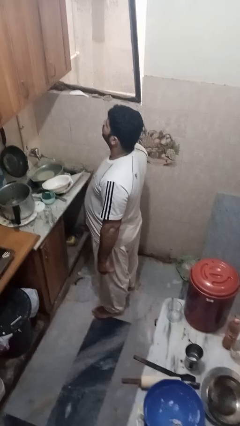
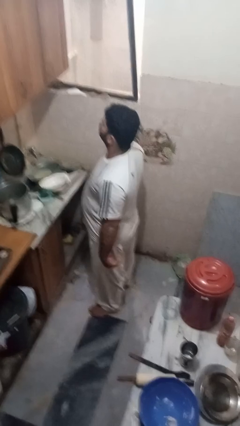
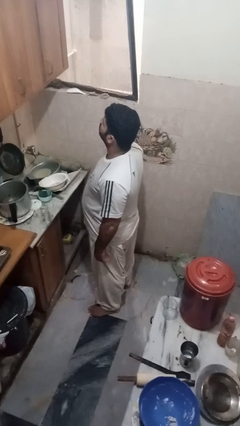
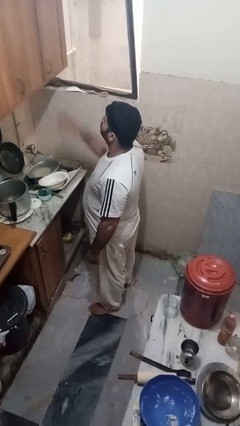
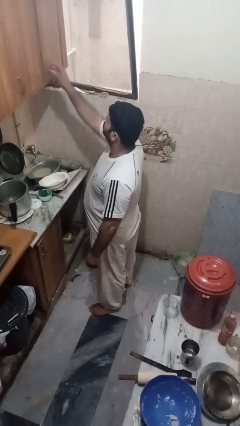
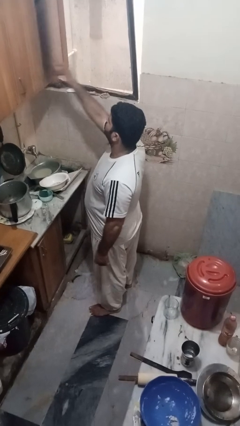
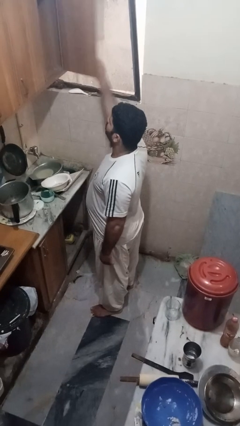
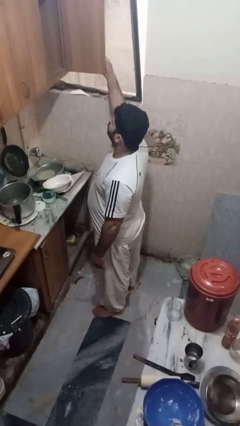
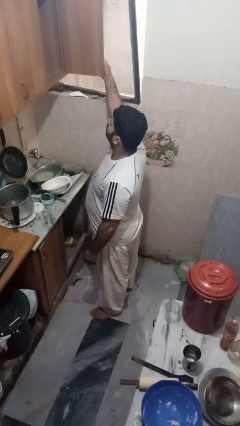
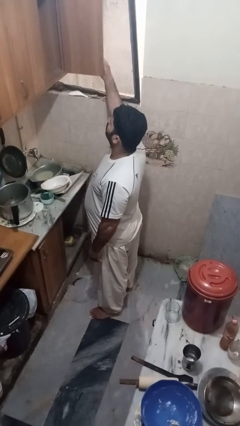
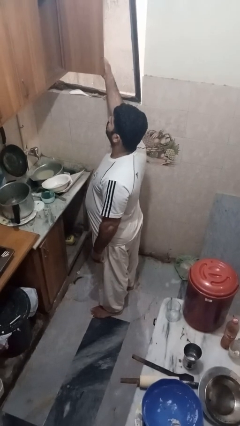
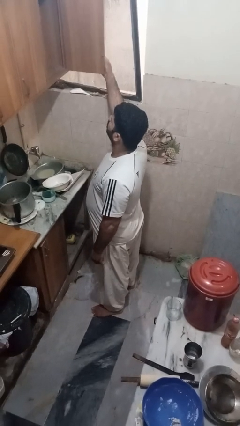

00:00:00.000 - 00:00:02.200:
person opens cabinet

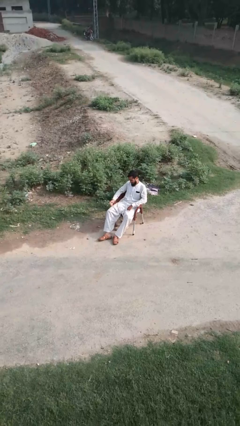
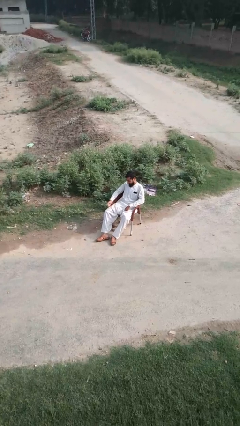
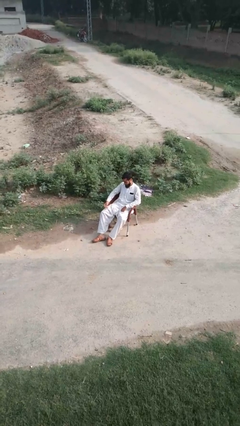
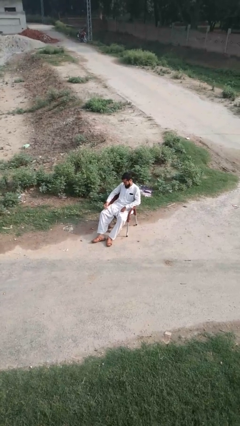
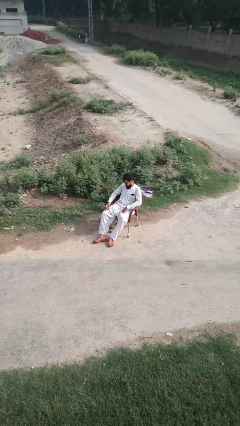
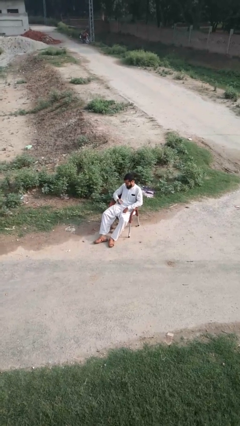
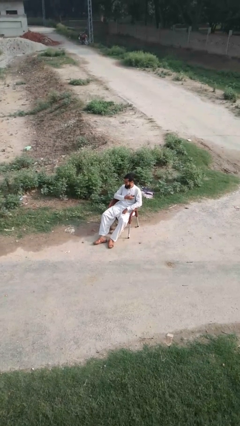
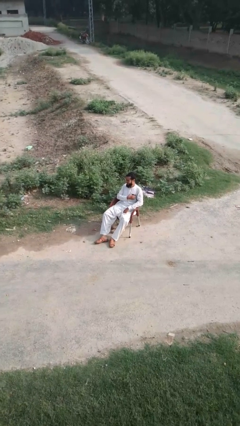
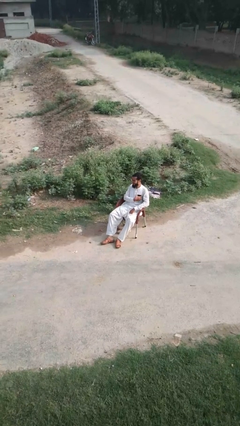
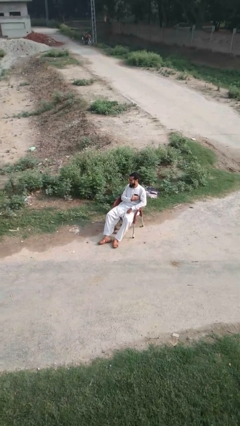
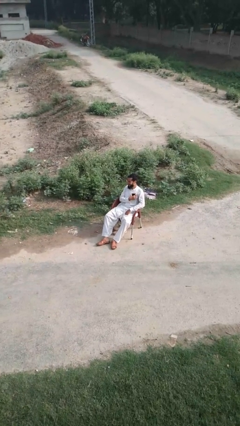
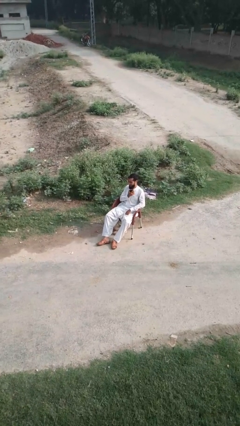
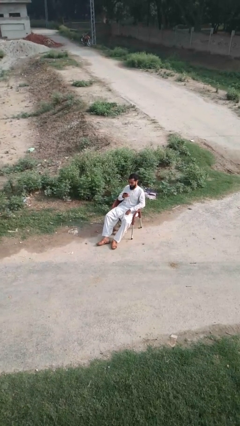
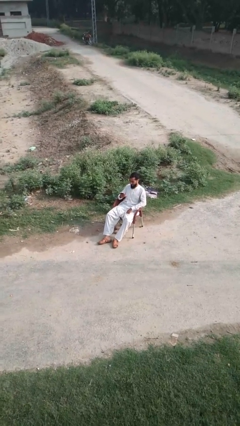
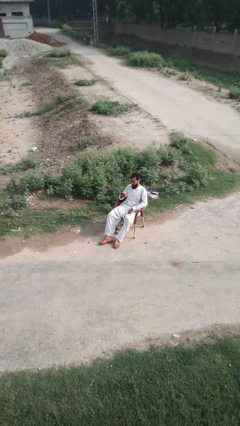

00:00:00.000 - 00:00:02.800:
person takes phone from pocket

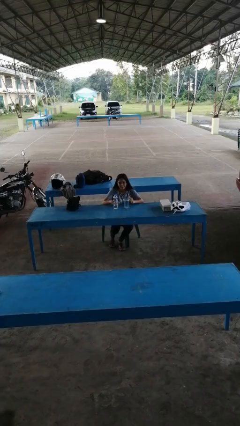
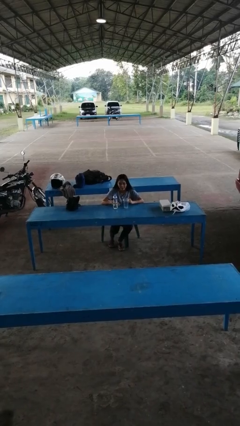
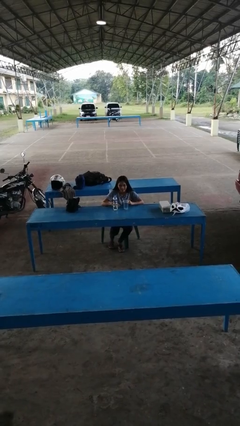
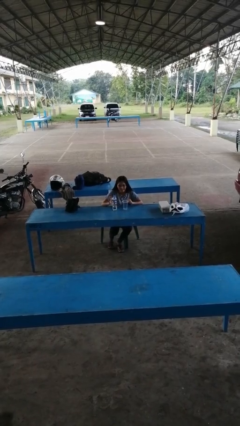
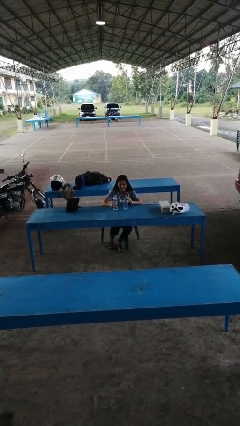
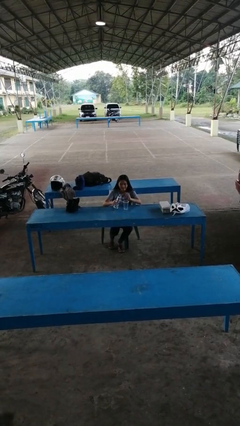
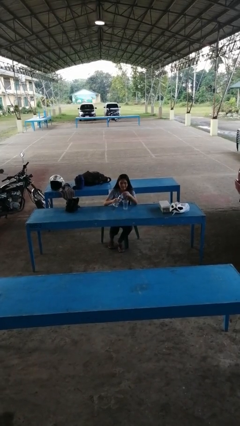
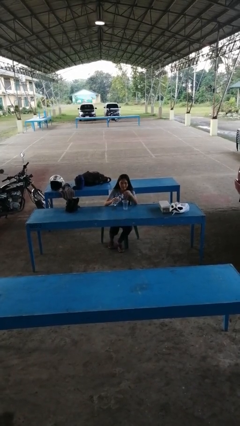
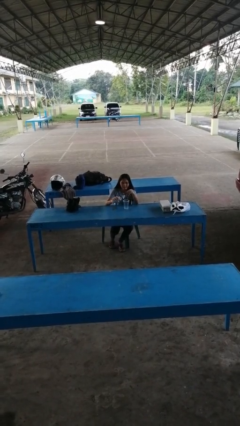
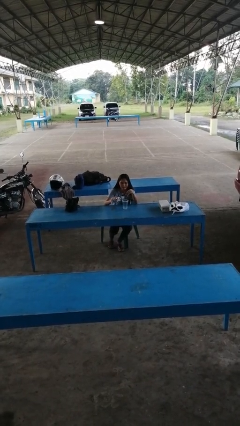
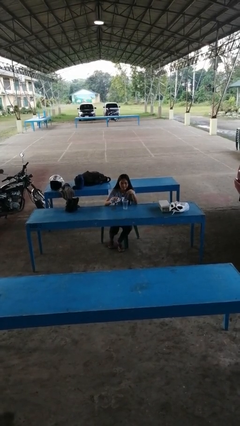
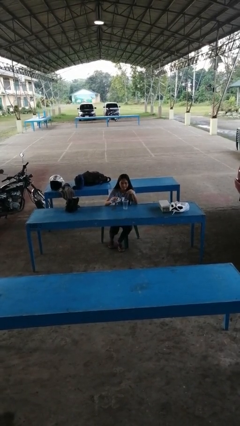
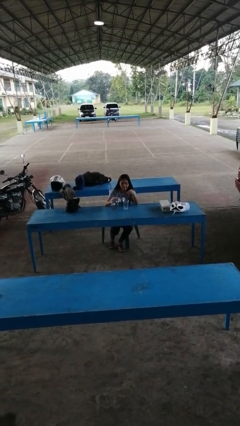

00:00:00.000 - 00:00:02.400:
person pours liquid into cup

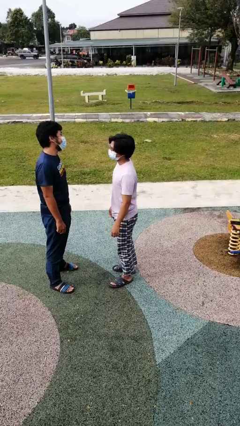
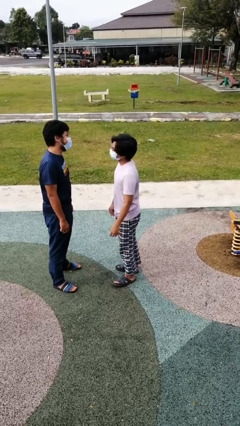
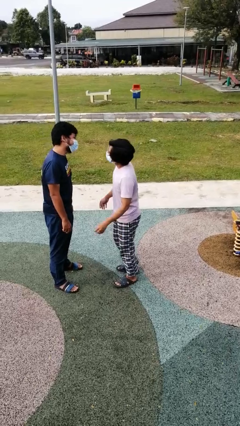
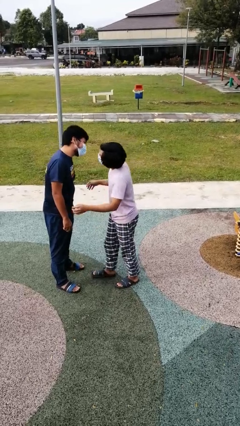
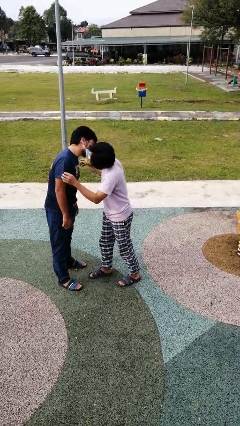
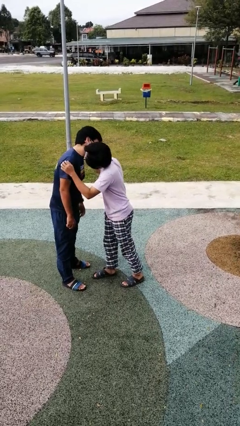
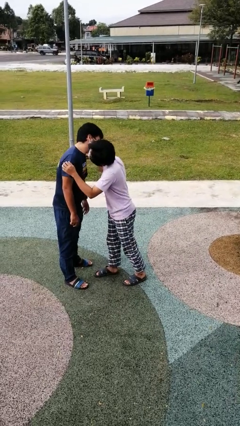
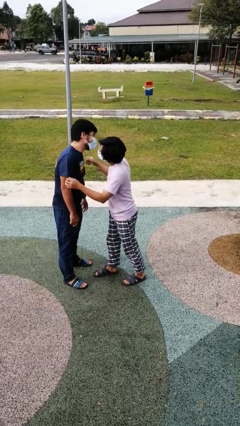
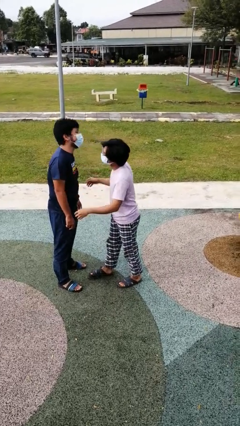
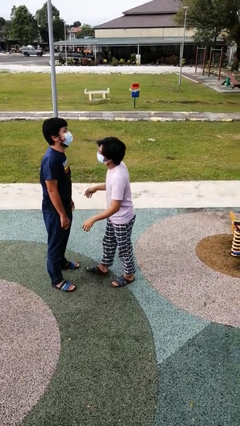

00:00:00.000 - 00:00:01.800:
person kisses cheek of person

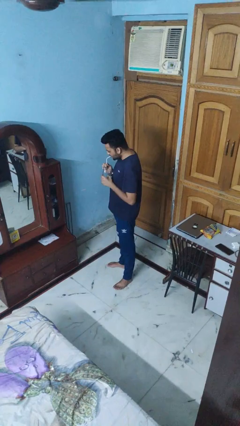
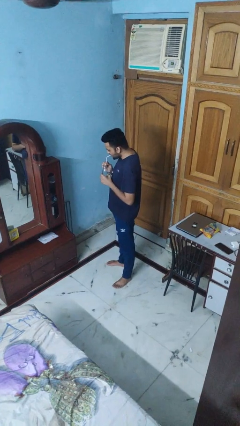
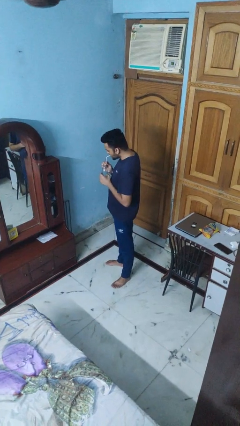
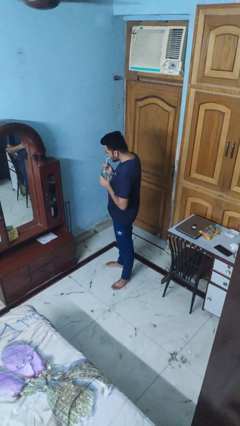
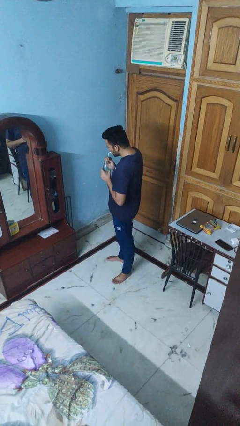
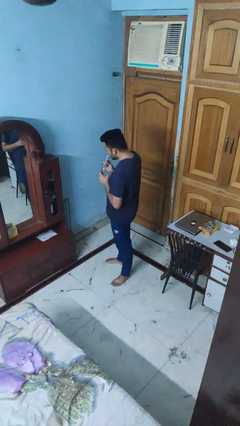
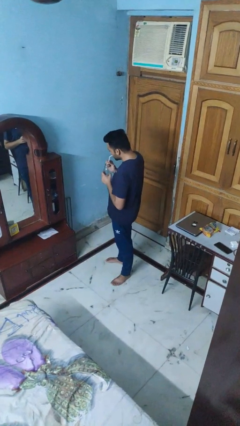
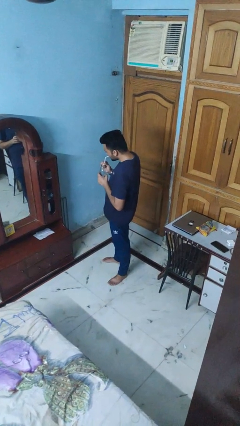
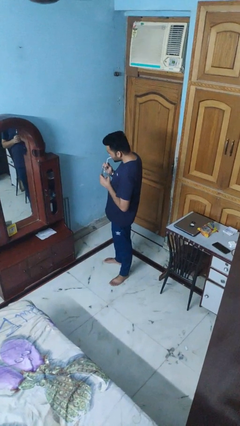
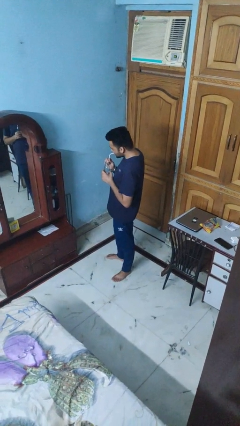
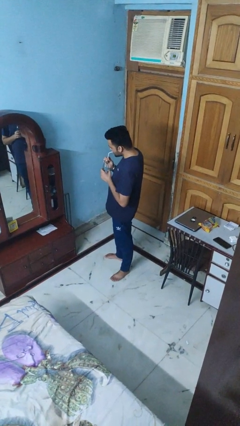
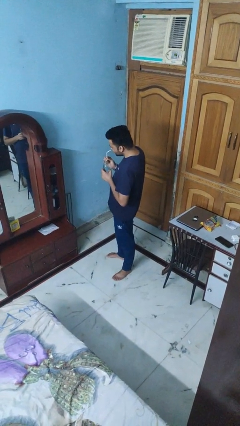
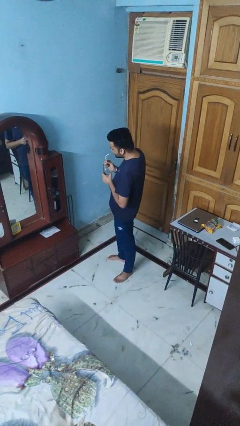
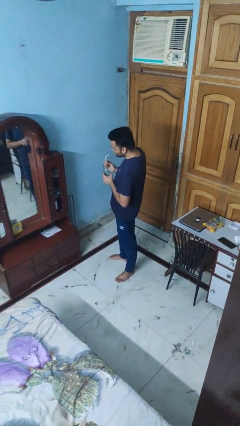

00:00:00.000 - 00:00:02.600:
person drinks from straw

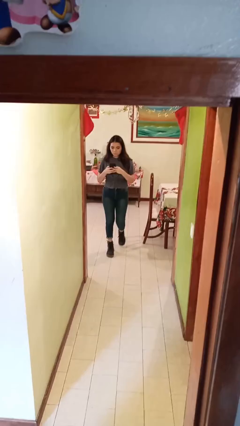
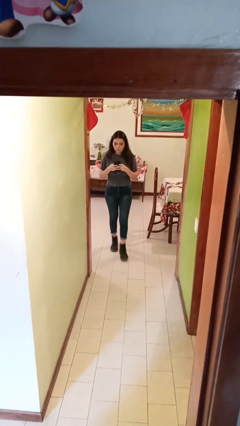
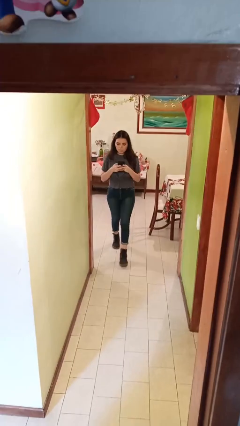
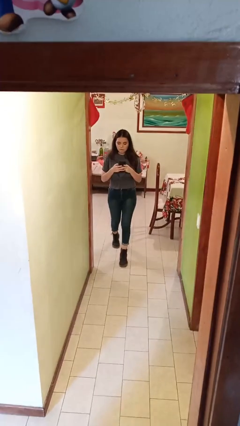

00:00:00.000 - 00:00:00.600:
person enters scene through structure

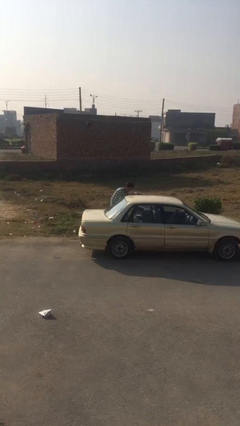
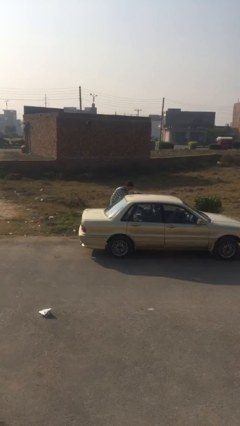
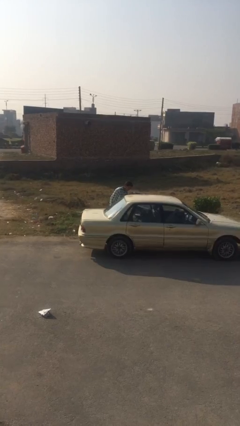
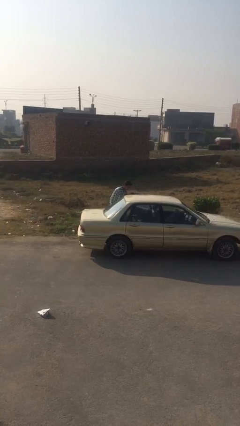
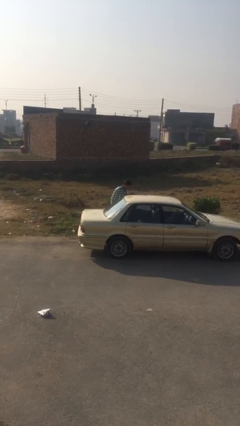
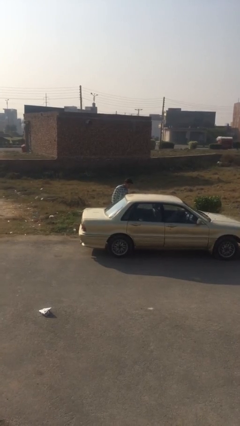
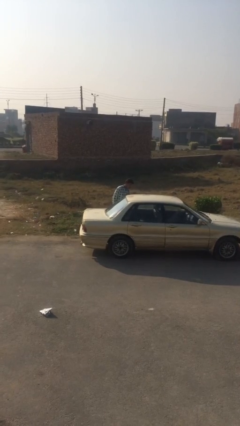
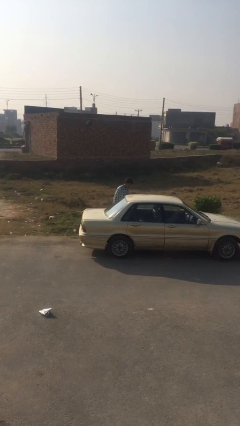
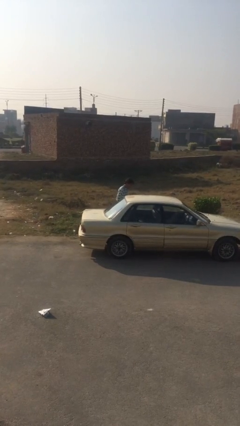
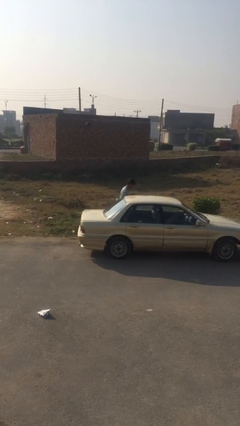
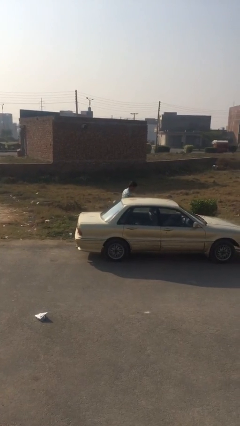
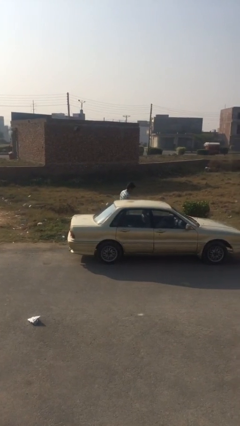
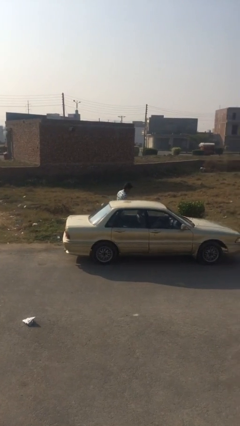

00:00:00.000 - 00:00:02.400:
person closes car door

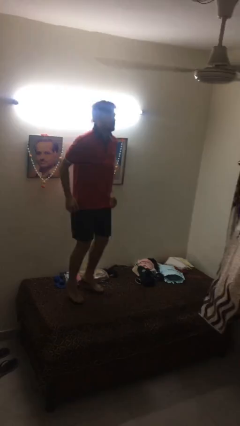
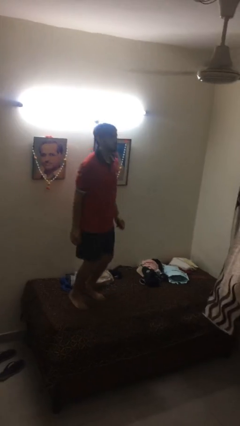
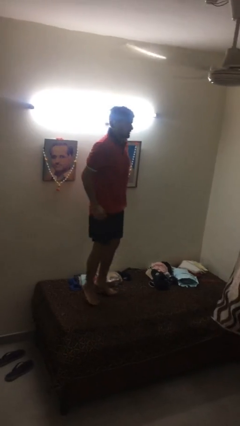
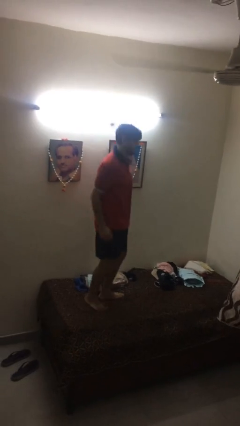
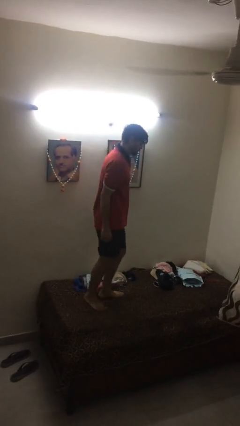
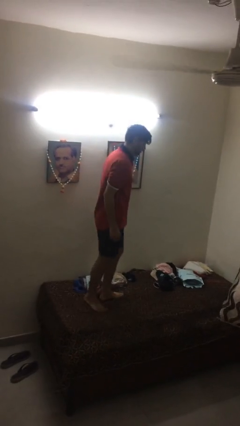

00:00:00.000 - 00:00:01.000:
person jumps on bed

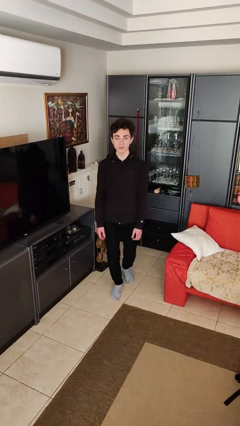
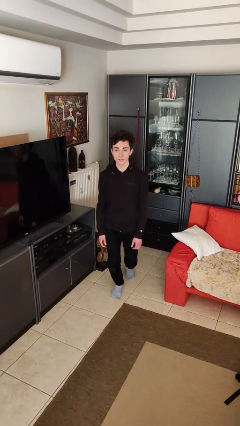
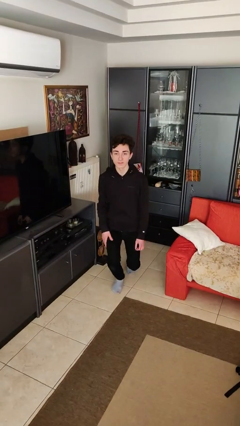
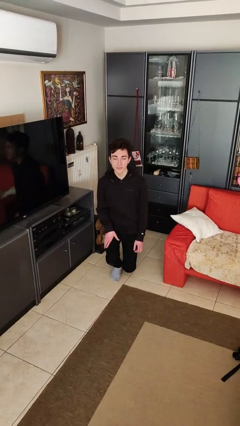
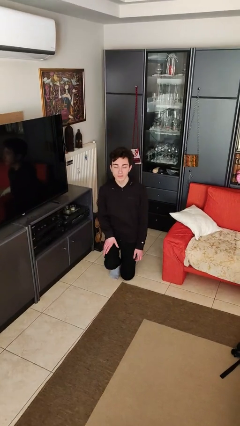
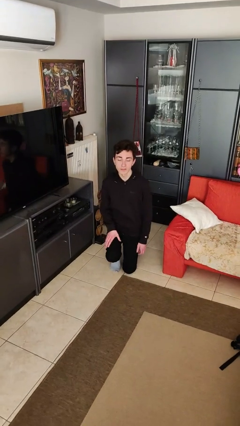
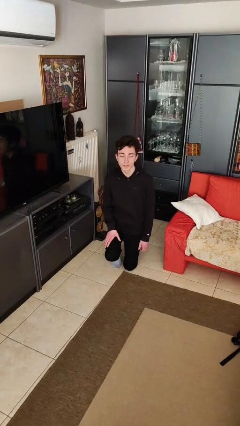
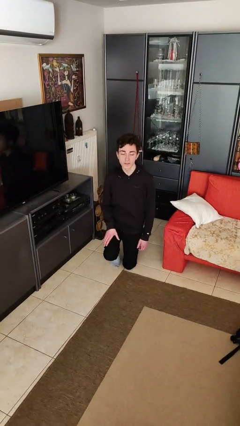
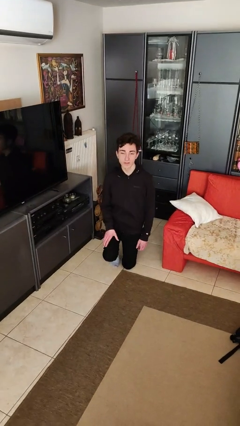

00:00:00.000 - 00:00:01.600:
person kneels
